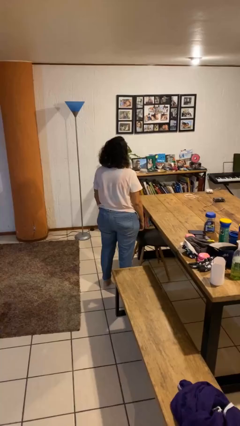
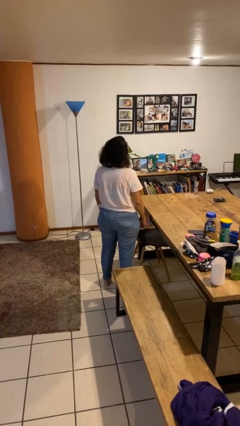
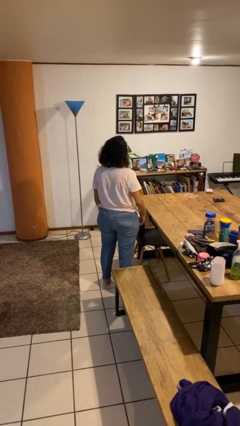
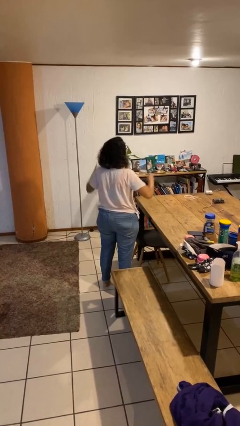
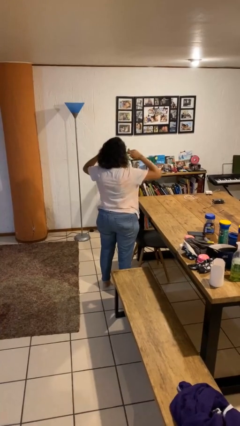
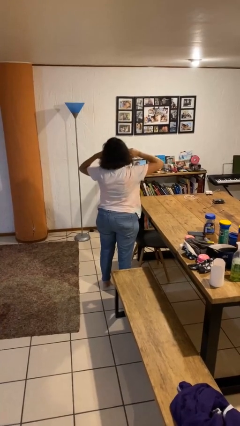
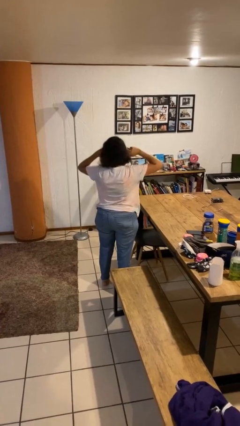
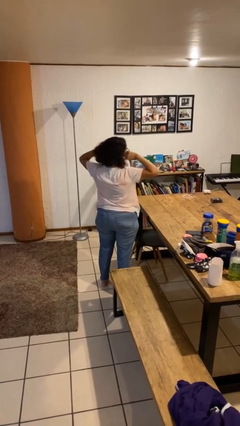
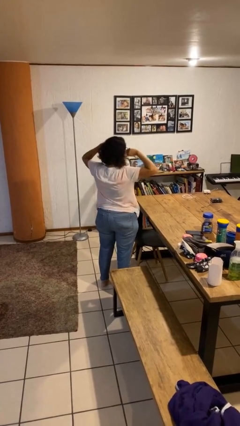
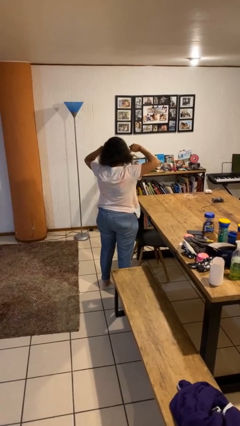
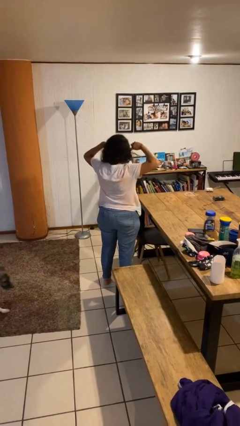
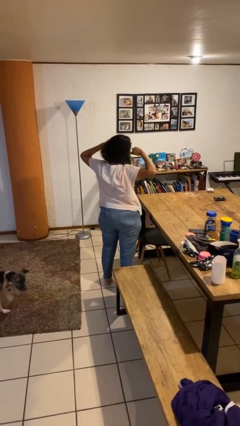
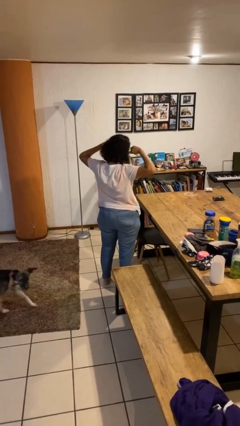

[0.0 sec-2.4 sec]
person puts fingers in ear

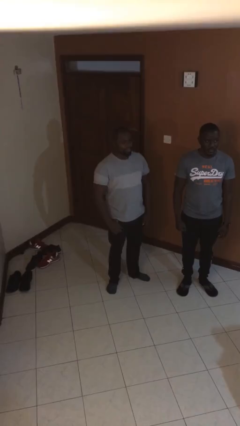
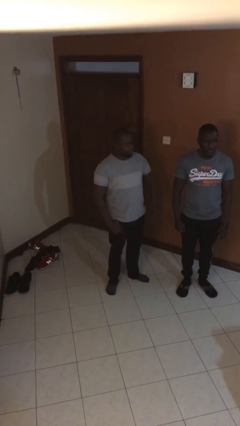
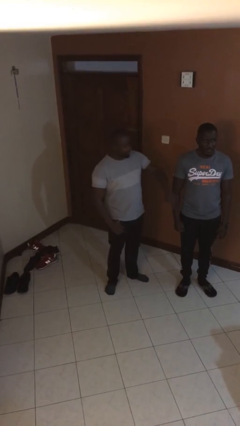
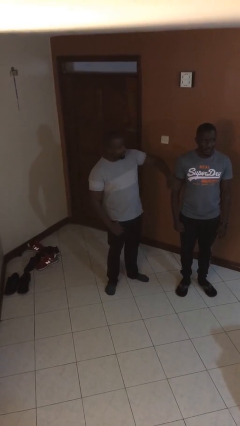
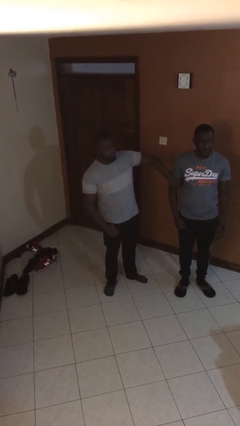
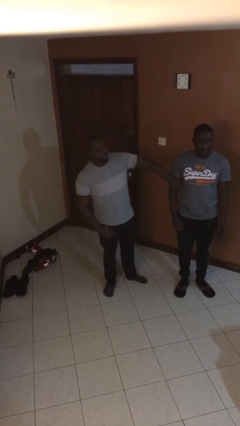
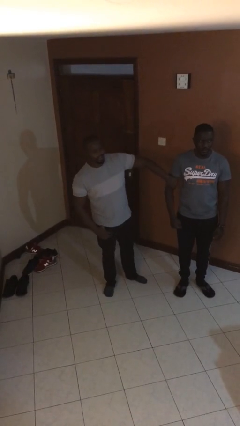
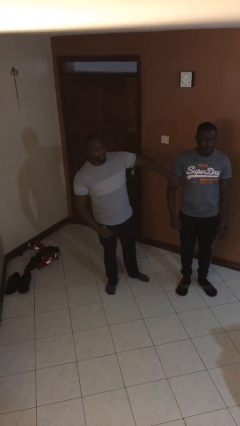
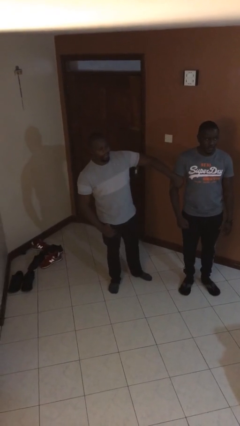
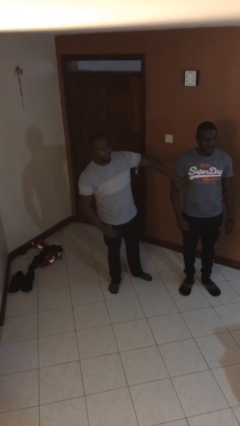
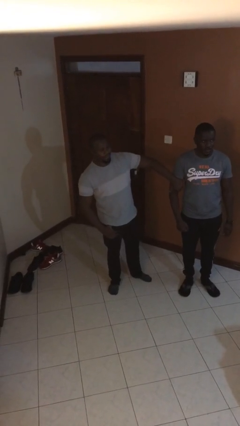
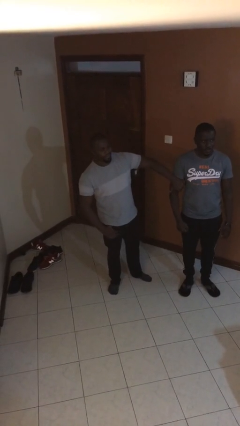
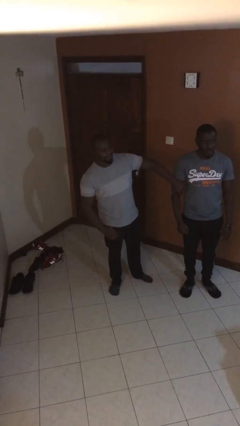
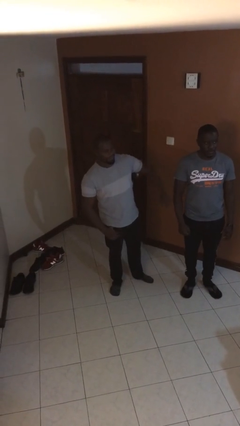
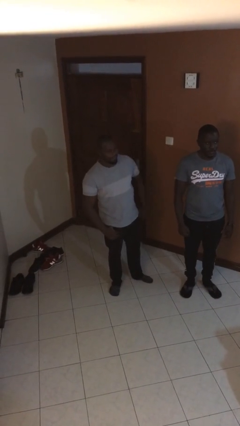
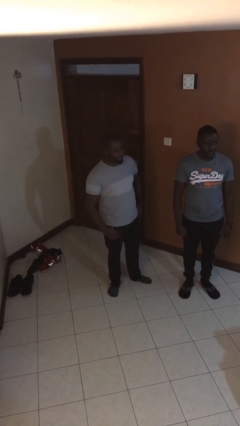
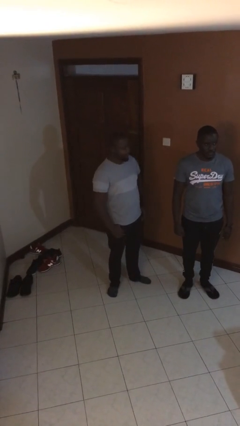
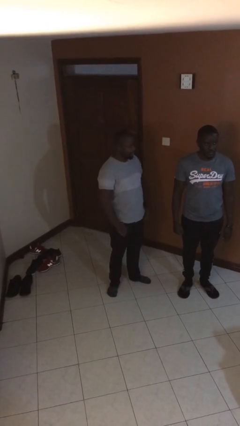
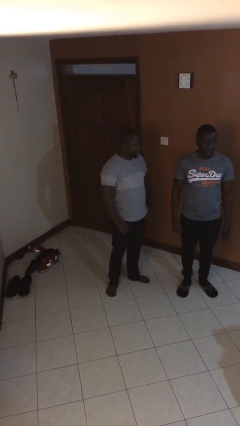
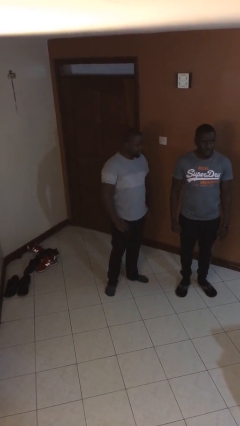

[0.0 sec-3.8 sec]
person grabs person by bicep

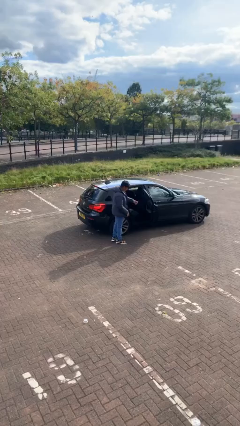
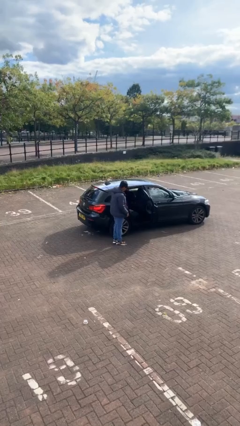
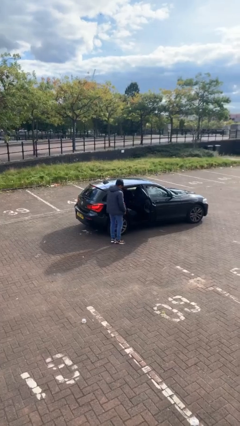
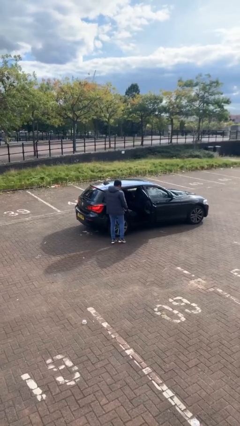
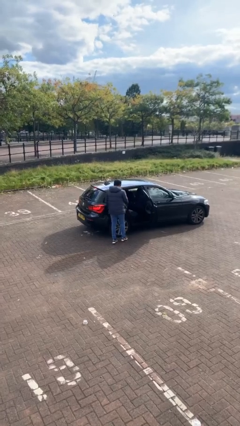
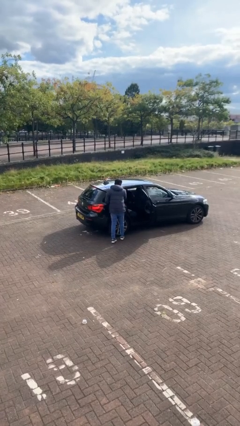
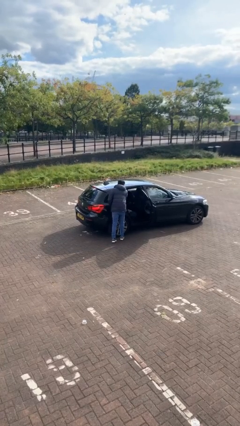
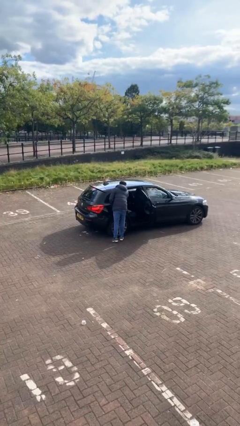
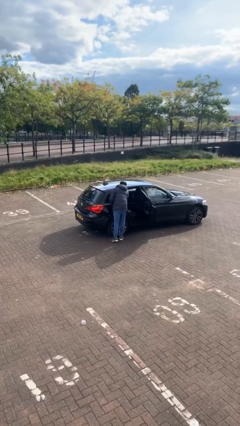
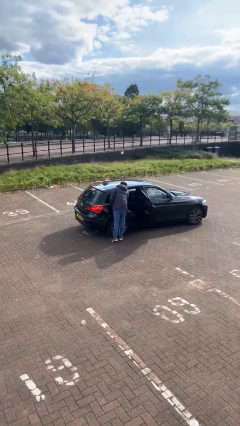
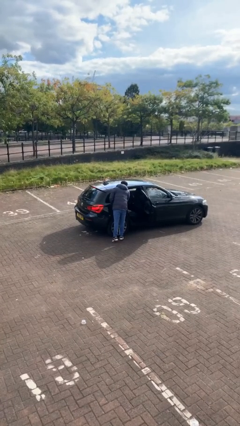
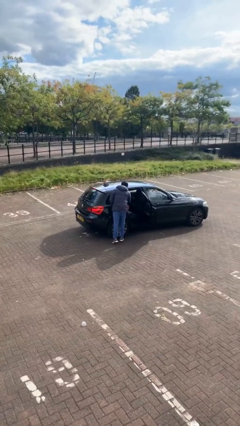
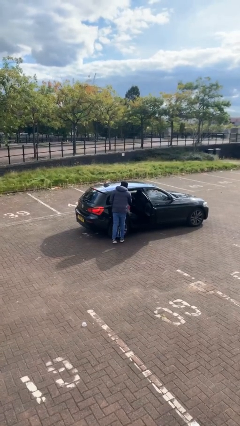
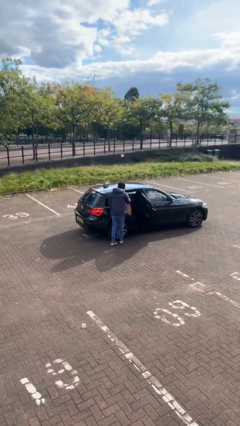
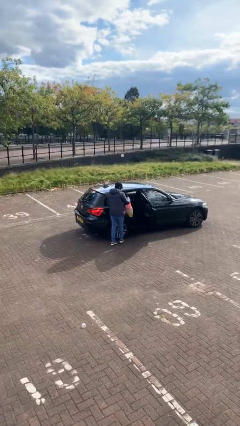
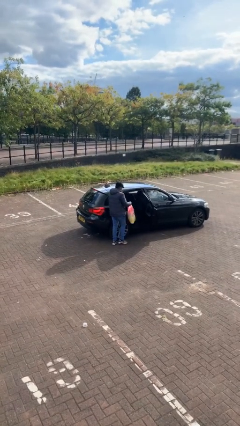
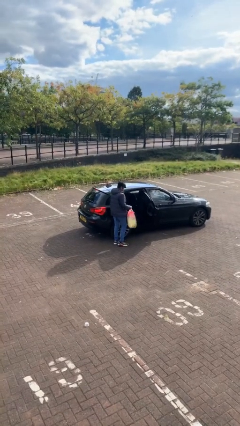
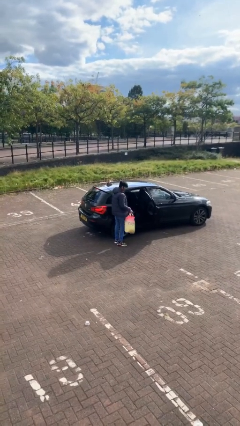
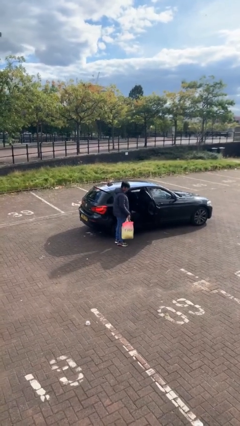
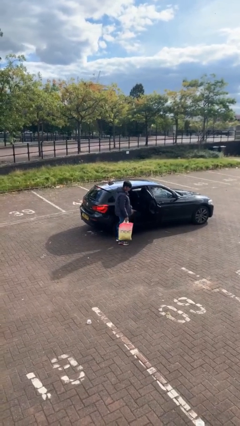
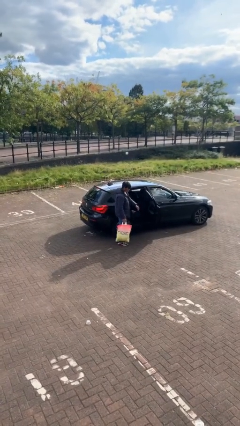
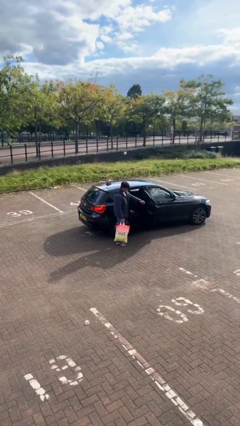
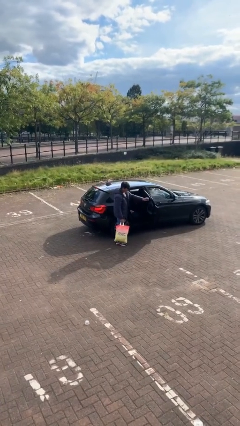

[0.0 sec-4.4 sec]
person unloads car

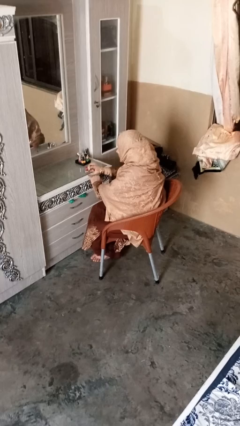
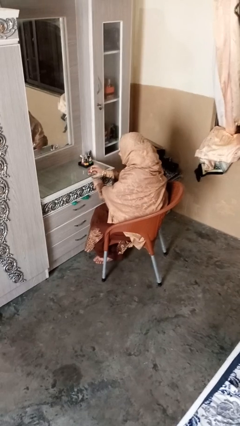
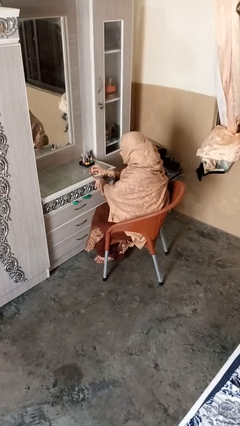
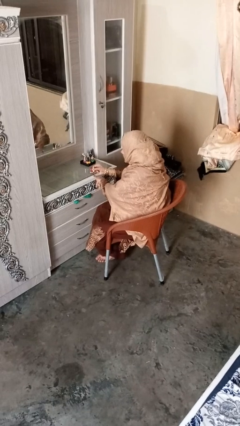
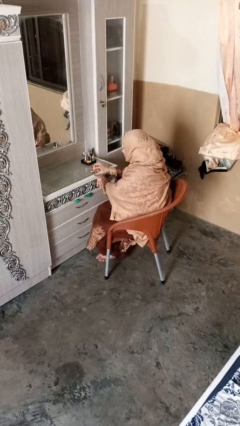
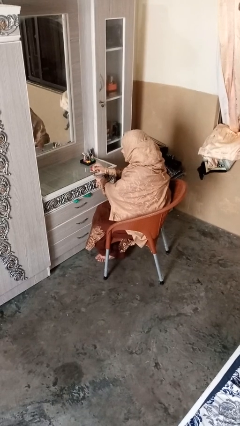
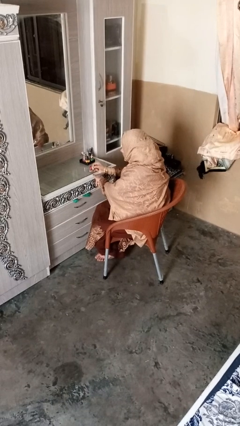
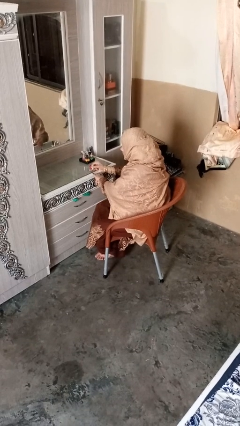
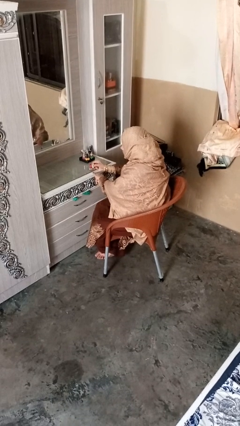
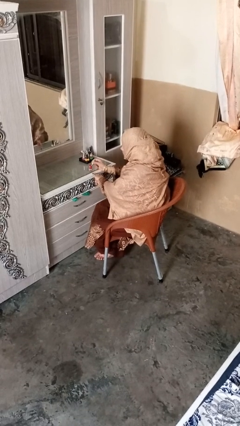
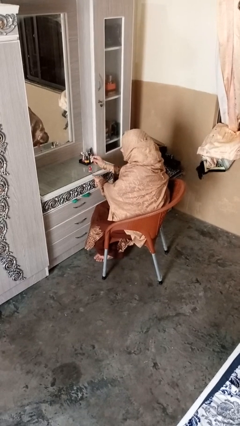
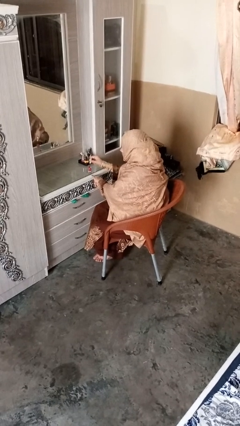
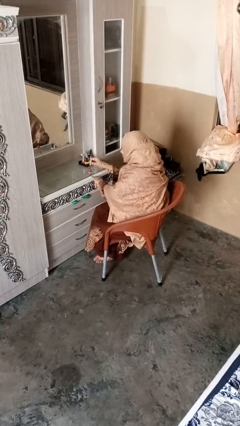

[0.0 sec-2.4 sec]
person paints fingernails

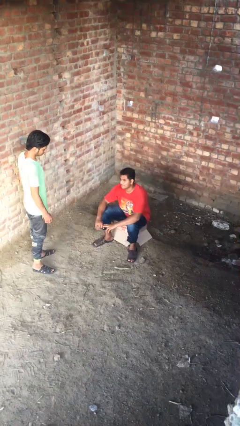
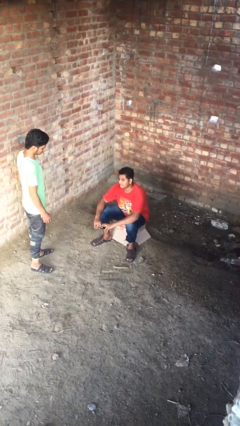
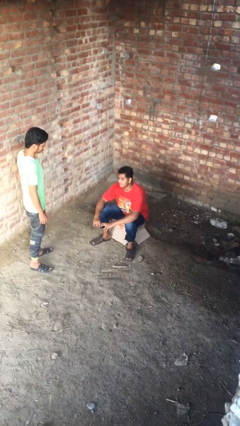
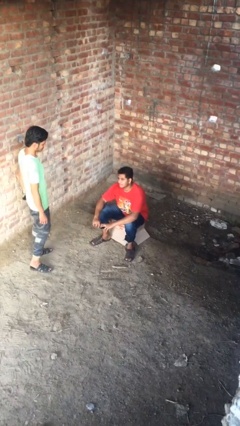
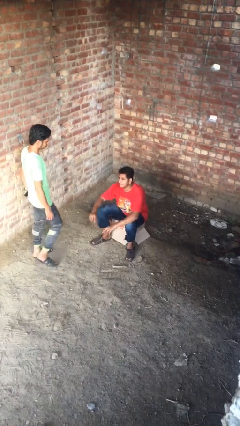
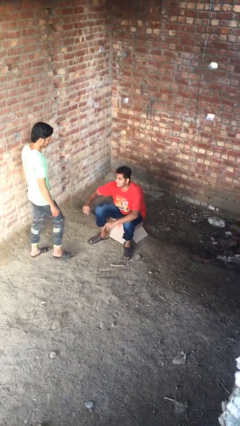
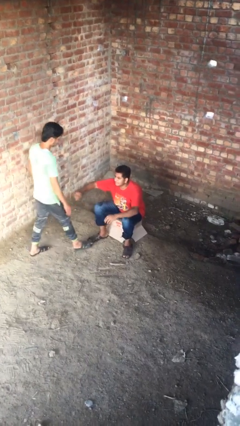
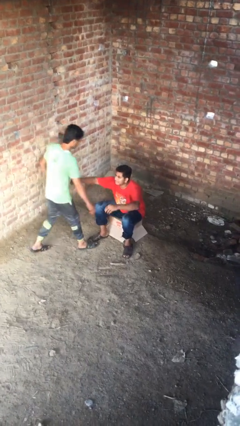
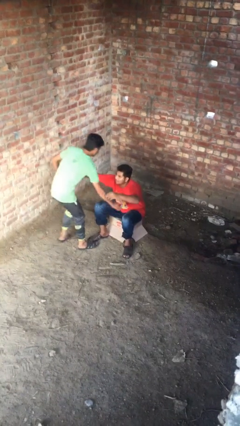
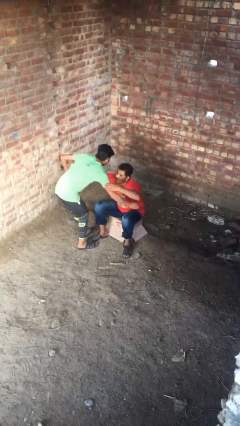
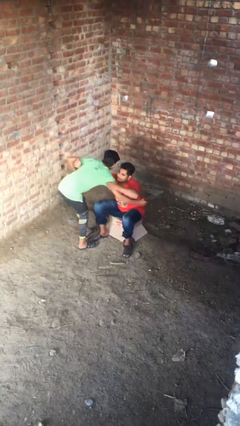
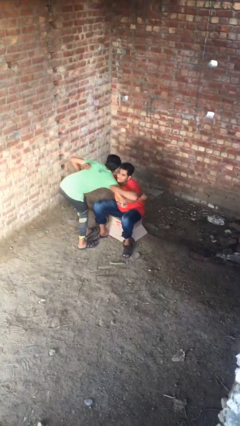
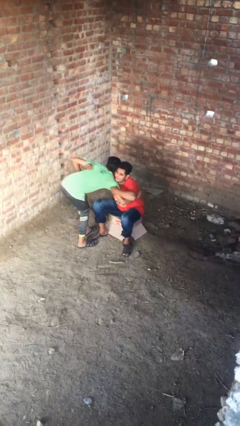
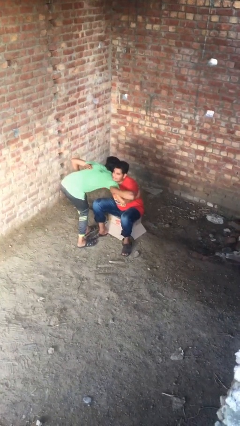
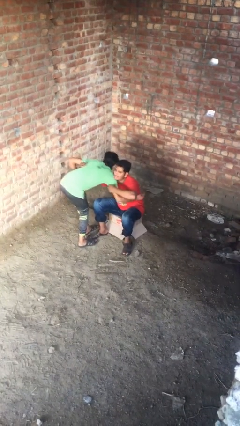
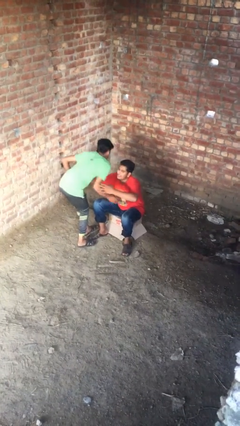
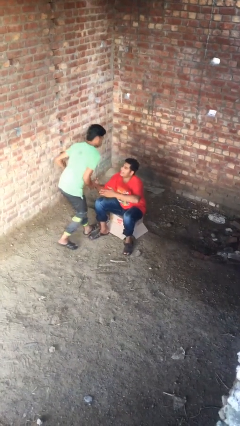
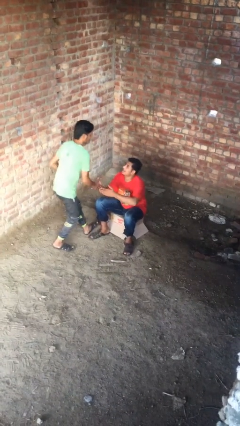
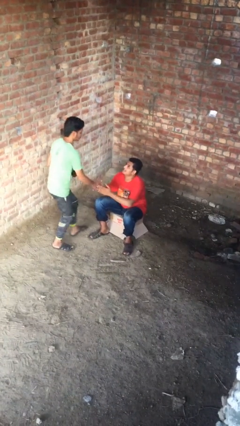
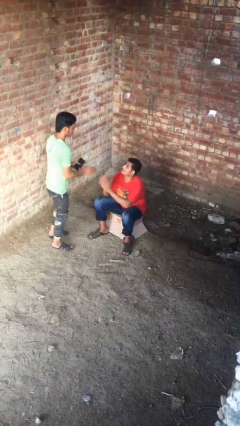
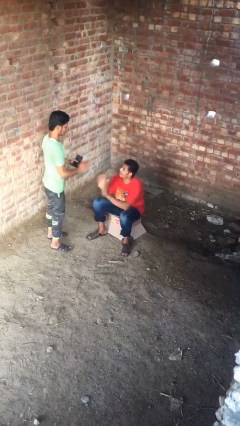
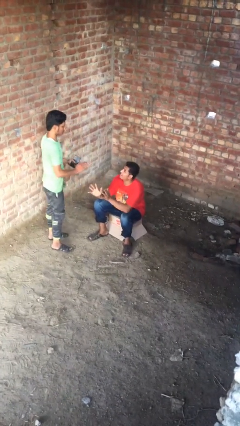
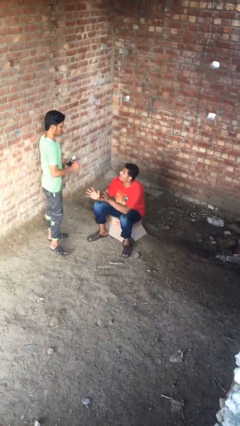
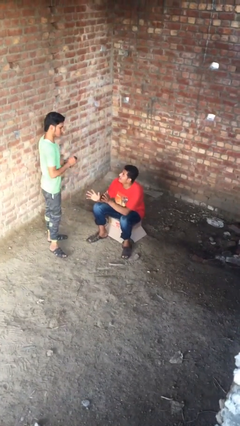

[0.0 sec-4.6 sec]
person embraces person

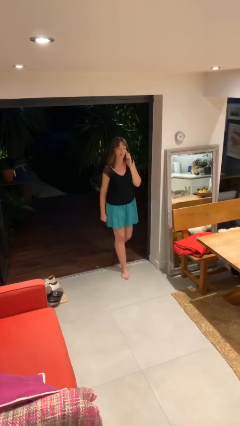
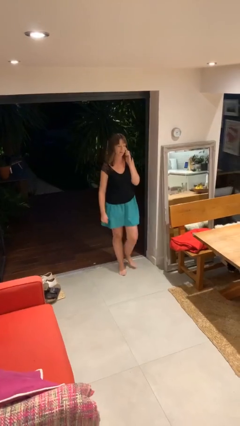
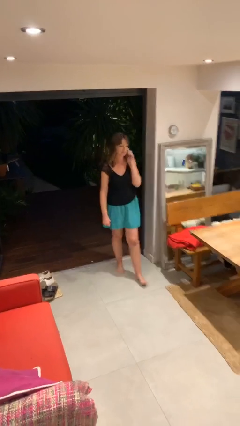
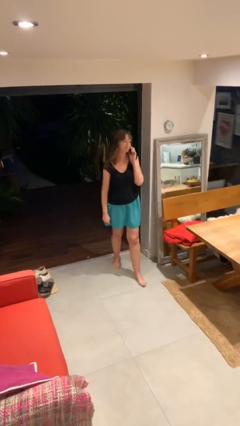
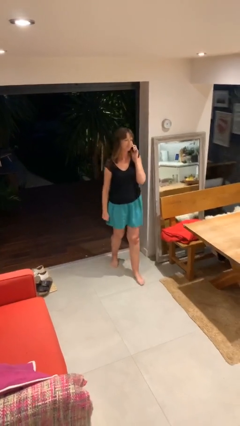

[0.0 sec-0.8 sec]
person enters scene through structure
